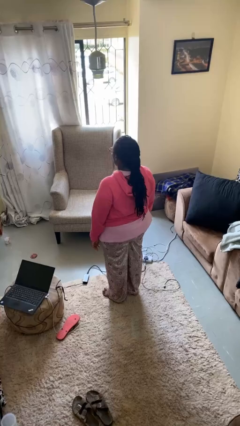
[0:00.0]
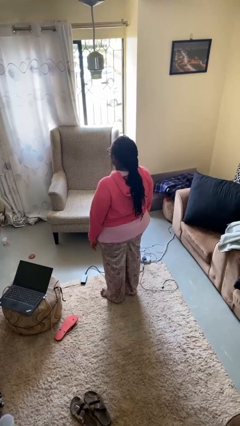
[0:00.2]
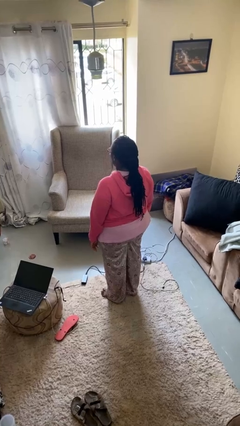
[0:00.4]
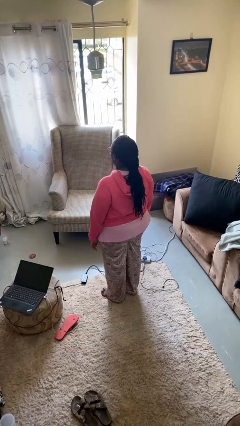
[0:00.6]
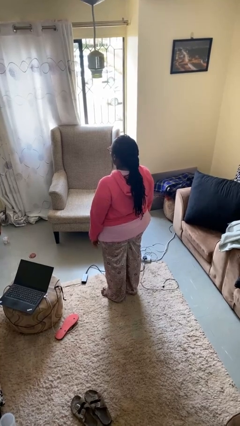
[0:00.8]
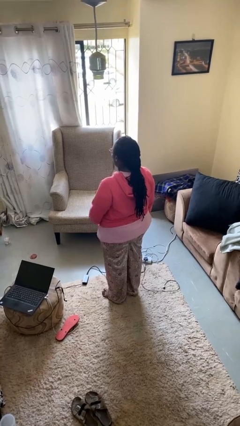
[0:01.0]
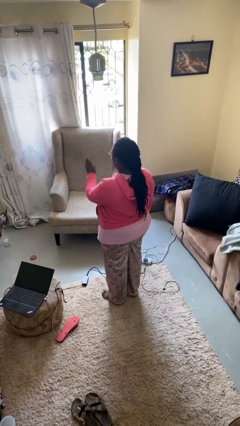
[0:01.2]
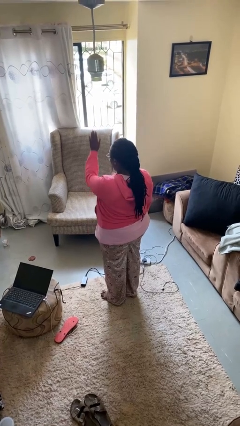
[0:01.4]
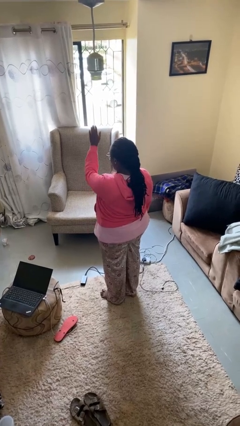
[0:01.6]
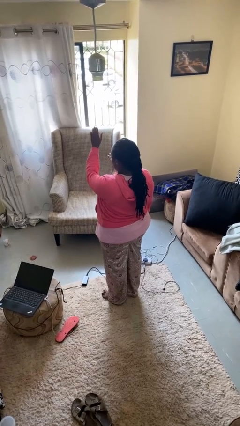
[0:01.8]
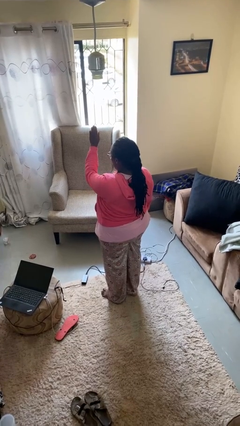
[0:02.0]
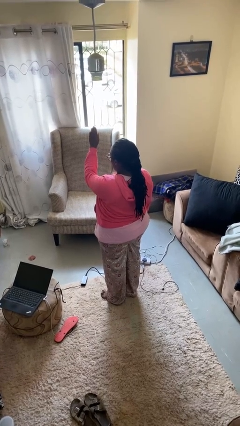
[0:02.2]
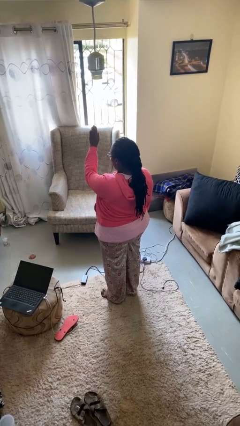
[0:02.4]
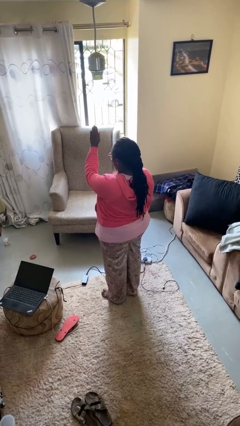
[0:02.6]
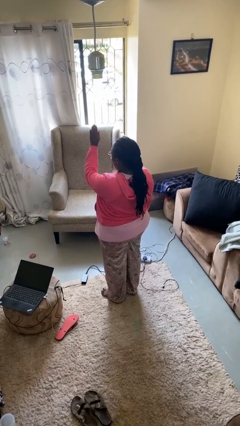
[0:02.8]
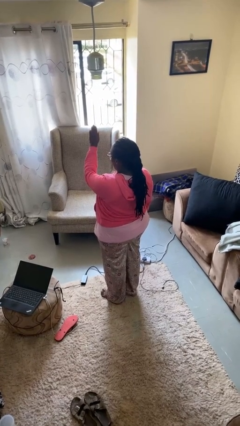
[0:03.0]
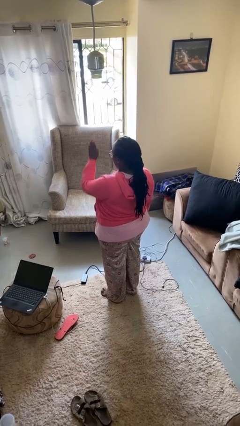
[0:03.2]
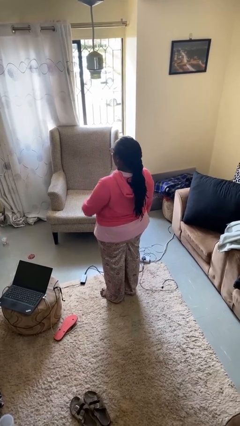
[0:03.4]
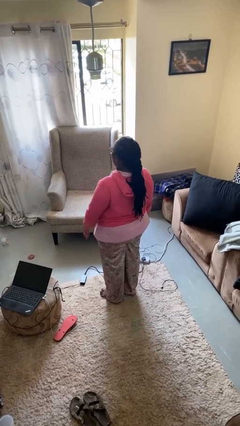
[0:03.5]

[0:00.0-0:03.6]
person gestures stop

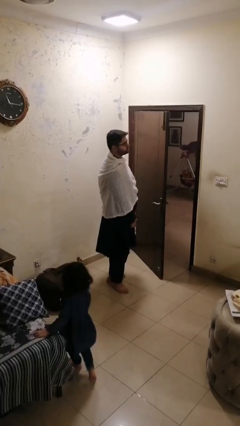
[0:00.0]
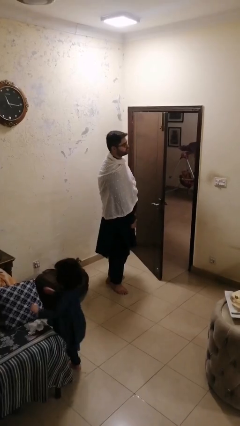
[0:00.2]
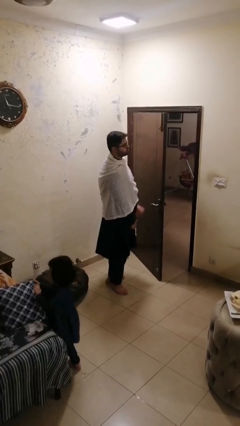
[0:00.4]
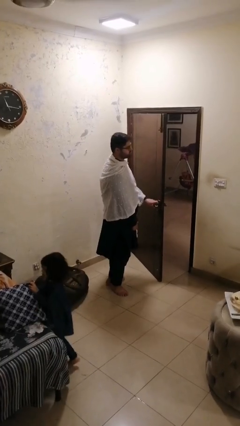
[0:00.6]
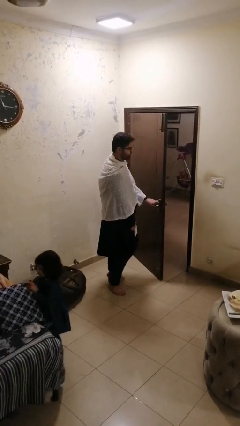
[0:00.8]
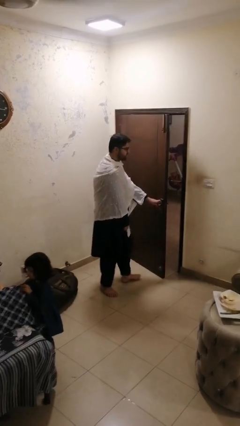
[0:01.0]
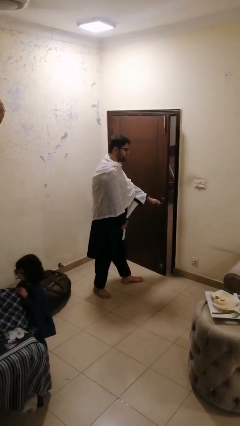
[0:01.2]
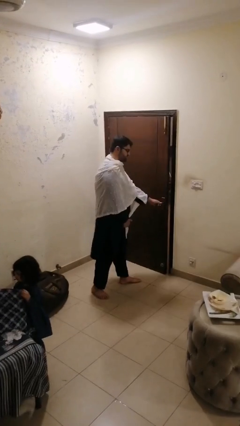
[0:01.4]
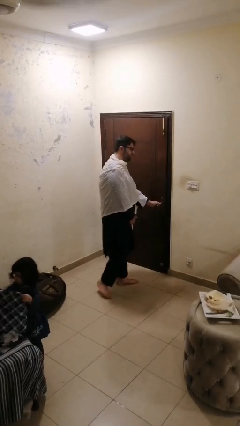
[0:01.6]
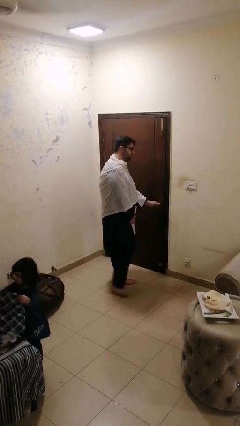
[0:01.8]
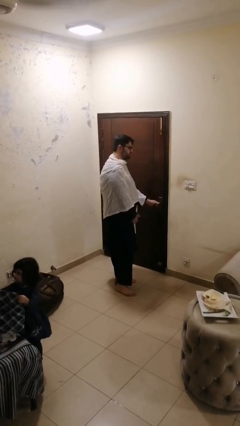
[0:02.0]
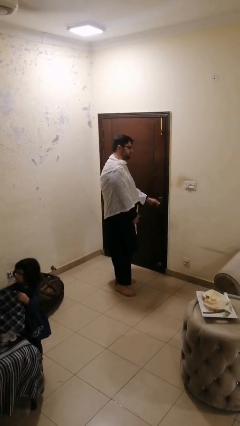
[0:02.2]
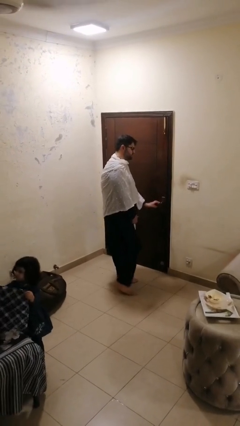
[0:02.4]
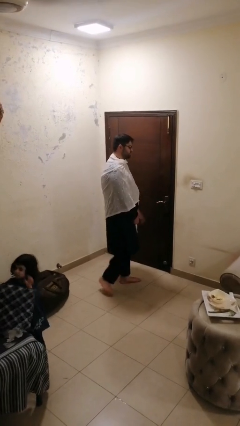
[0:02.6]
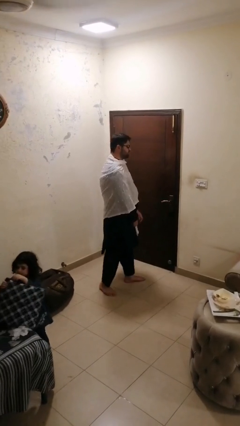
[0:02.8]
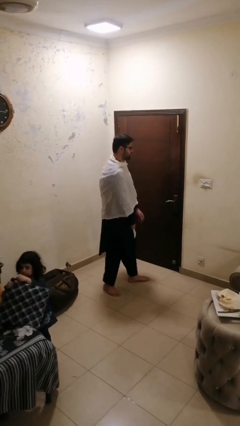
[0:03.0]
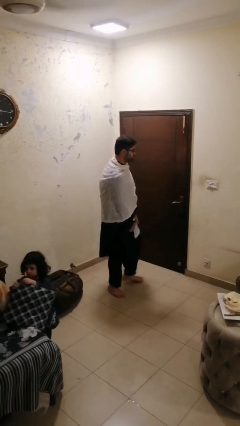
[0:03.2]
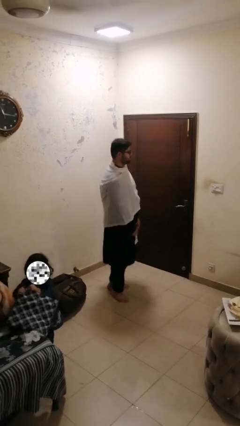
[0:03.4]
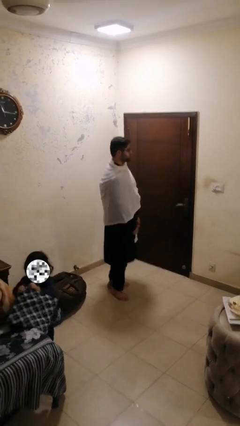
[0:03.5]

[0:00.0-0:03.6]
person closes facility door

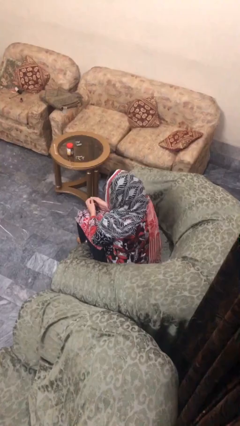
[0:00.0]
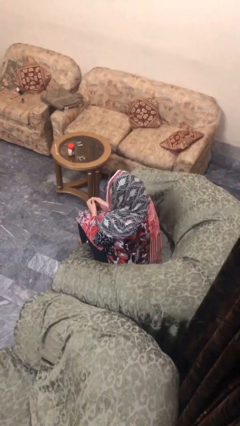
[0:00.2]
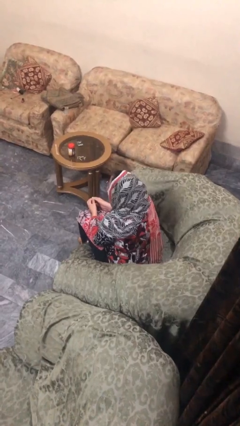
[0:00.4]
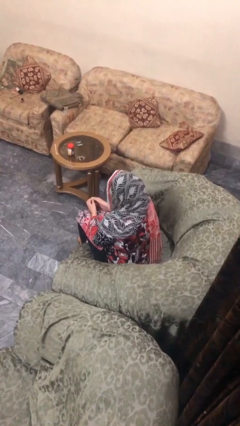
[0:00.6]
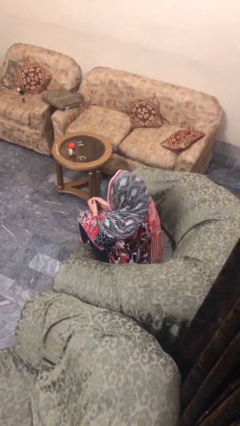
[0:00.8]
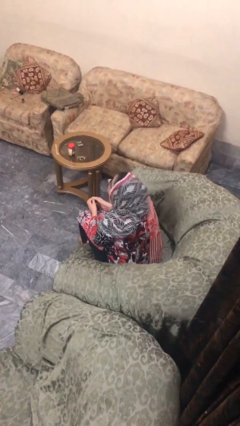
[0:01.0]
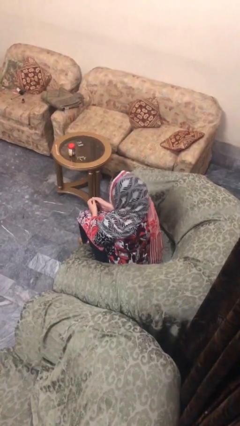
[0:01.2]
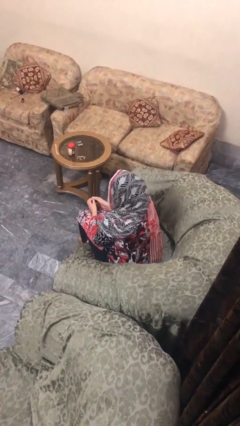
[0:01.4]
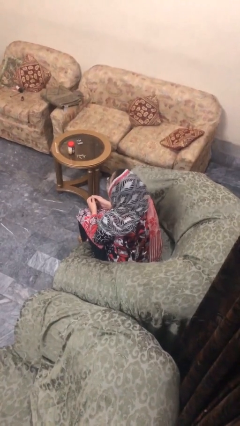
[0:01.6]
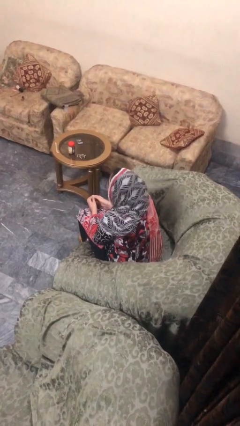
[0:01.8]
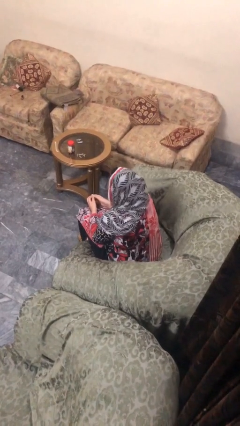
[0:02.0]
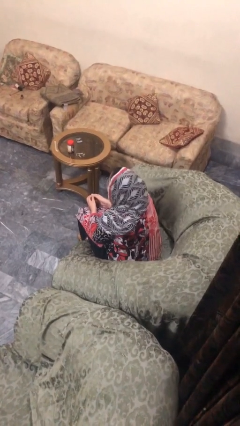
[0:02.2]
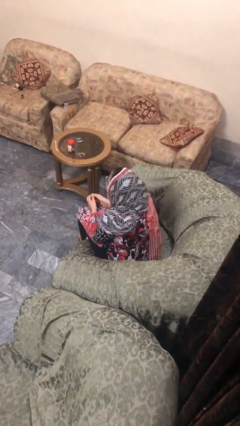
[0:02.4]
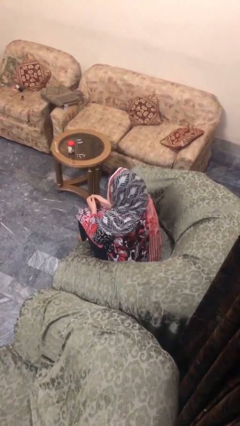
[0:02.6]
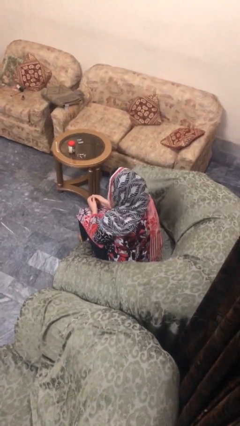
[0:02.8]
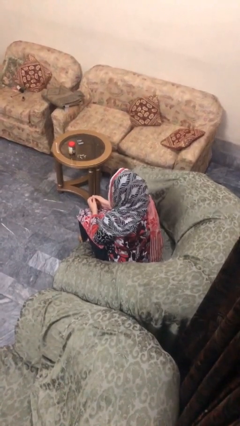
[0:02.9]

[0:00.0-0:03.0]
person nods head

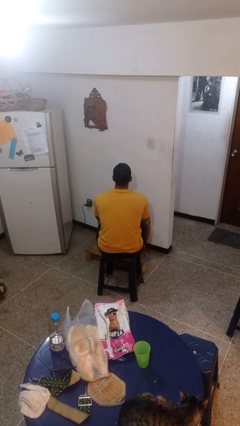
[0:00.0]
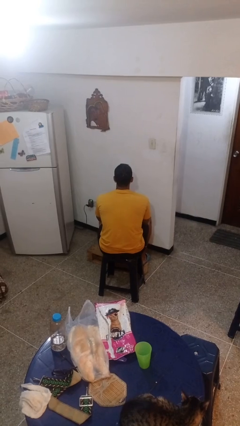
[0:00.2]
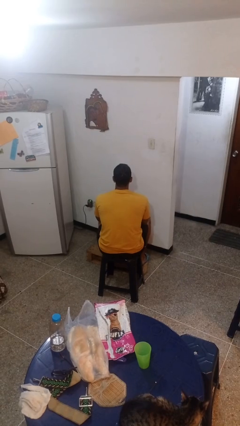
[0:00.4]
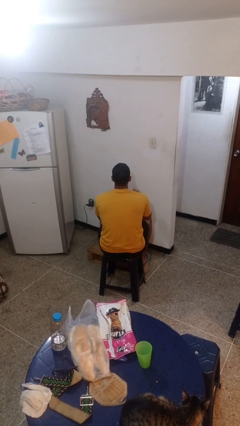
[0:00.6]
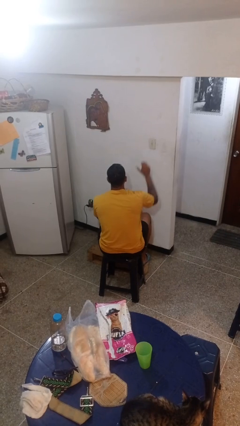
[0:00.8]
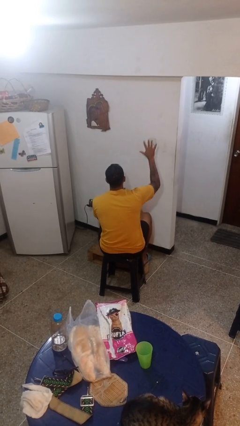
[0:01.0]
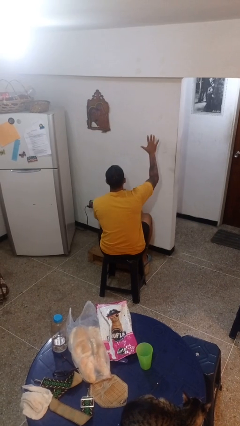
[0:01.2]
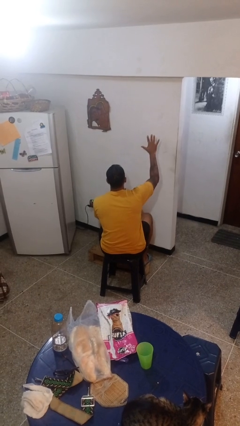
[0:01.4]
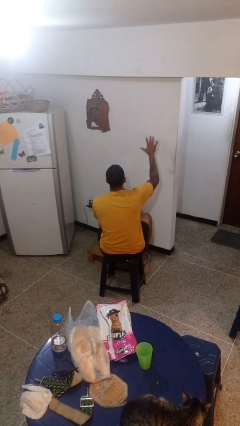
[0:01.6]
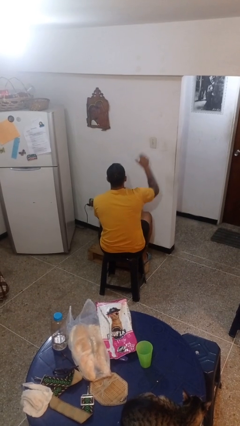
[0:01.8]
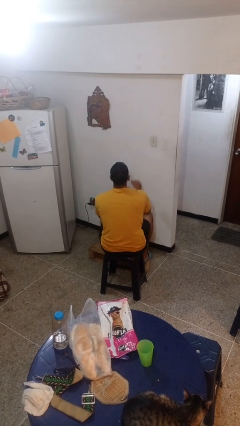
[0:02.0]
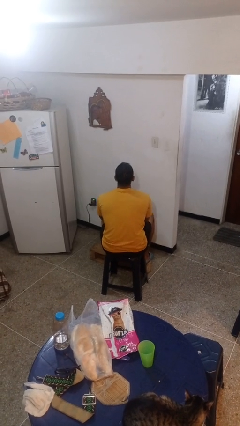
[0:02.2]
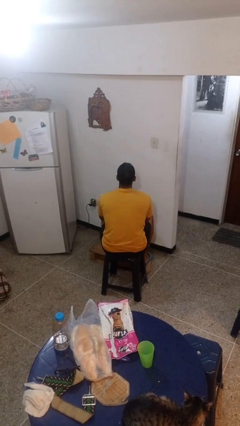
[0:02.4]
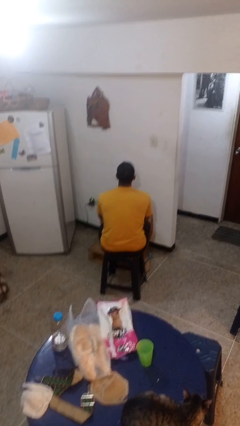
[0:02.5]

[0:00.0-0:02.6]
person gestures number five

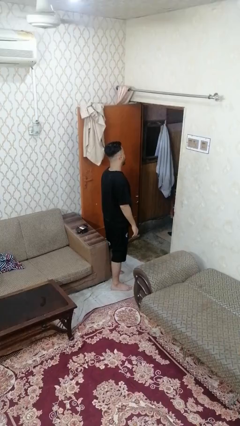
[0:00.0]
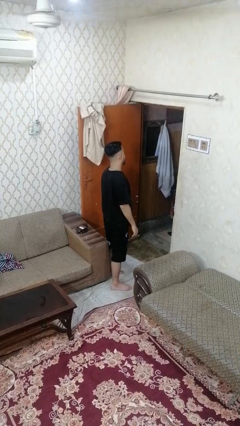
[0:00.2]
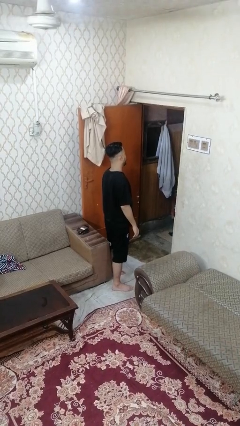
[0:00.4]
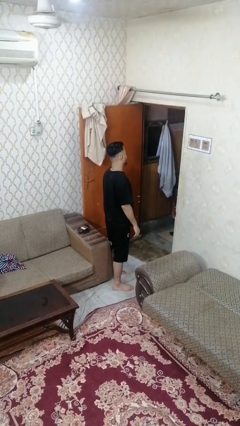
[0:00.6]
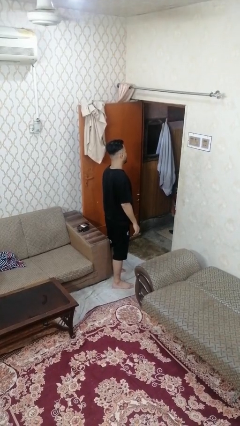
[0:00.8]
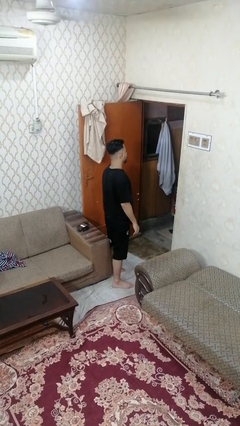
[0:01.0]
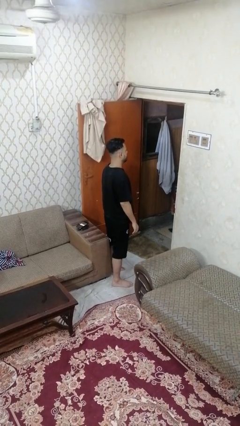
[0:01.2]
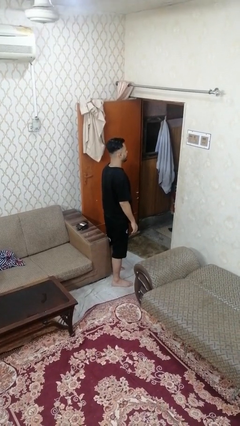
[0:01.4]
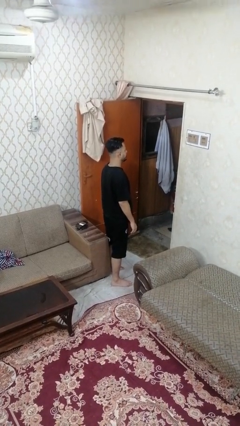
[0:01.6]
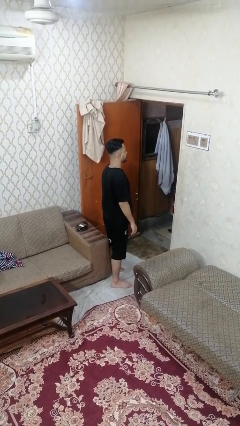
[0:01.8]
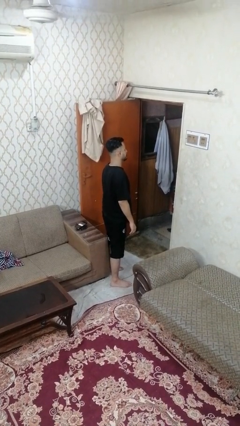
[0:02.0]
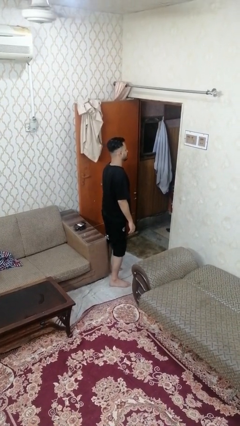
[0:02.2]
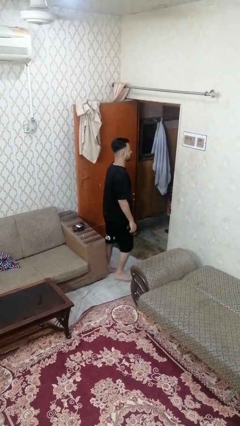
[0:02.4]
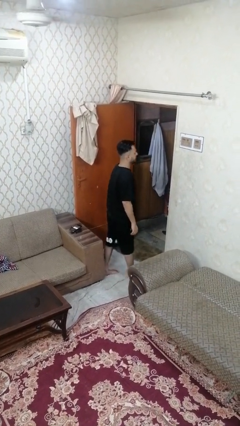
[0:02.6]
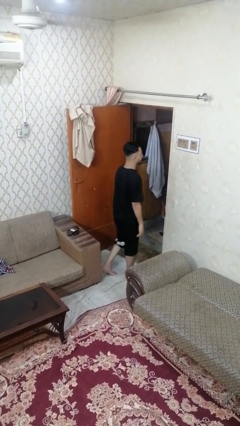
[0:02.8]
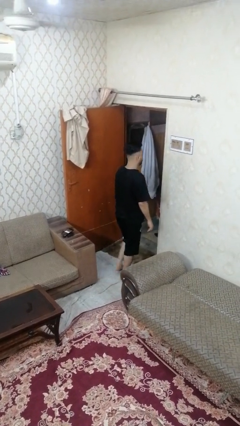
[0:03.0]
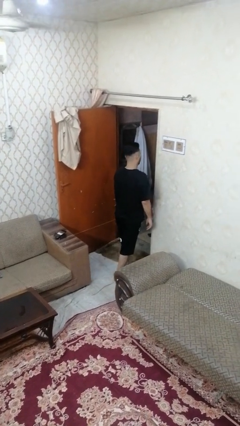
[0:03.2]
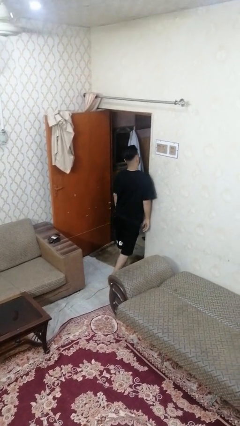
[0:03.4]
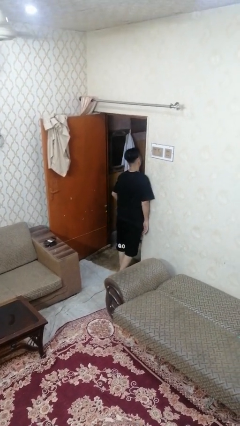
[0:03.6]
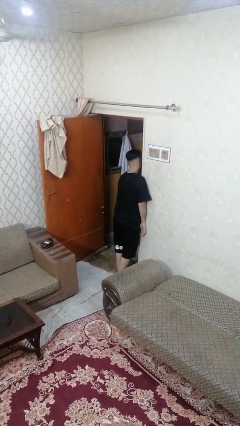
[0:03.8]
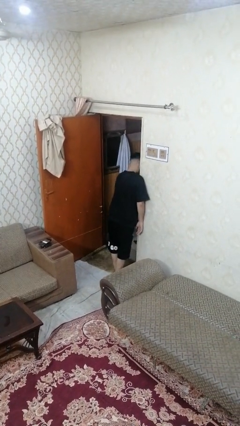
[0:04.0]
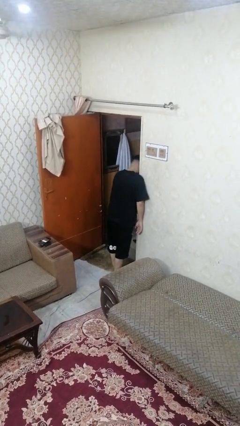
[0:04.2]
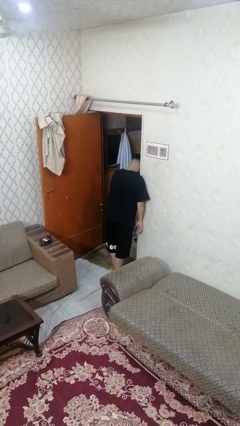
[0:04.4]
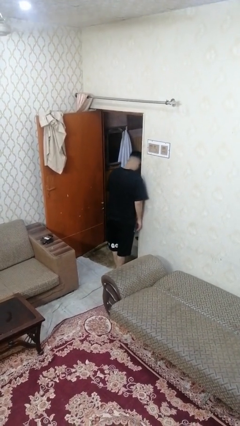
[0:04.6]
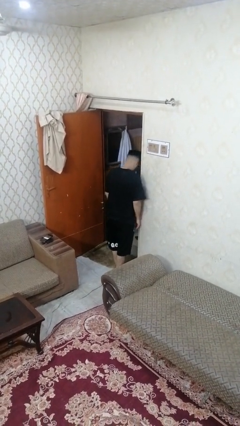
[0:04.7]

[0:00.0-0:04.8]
person bumps into wall
